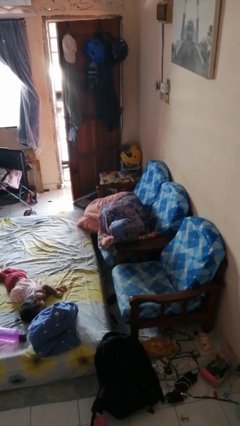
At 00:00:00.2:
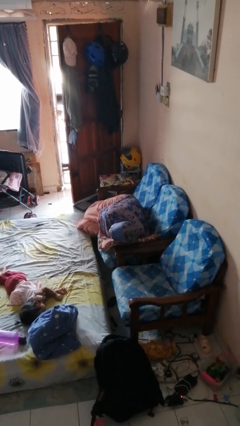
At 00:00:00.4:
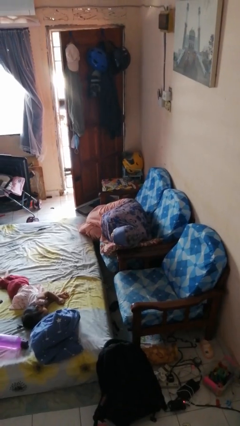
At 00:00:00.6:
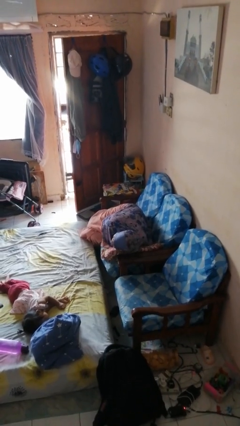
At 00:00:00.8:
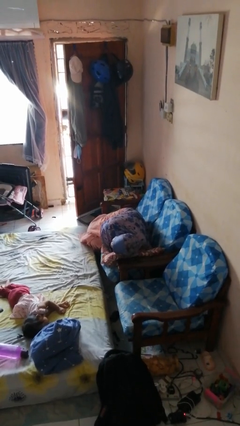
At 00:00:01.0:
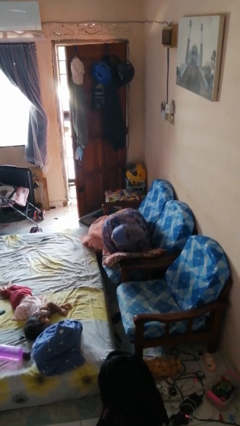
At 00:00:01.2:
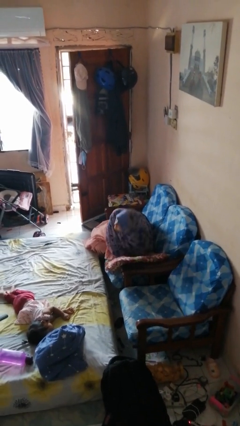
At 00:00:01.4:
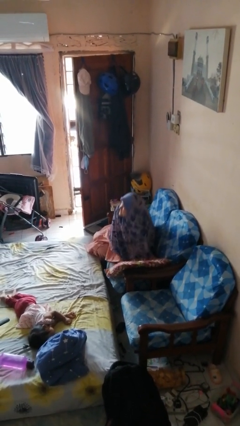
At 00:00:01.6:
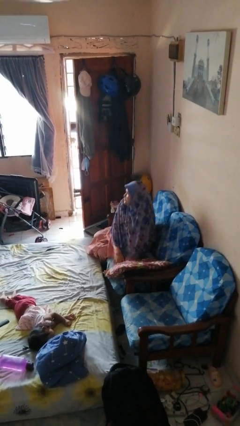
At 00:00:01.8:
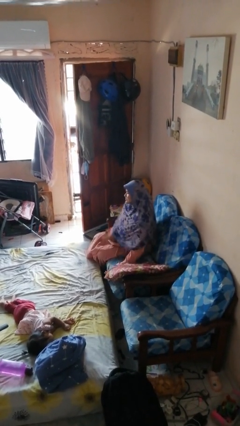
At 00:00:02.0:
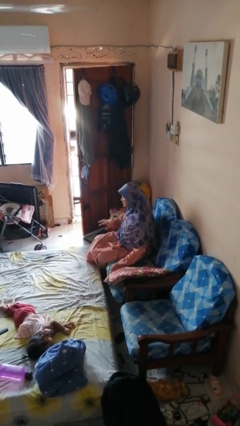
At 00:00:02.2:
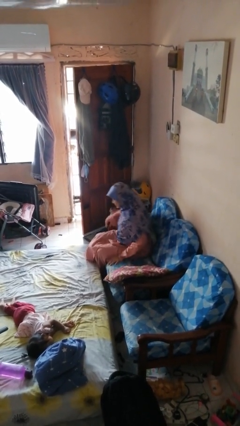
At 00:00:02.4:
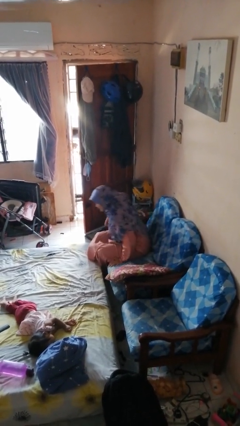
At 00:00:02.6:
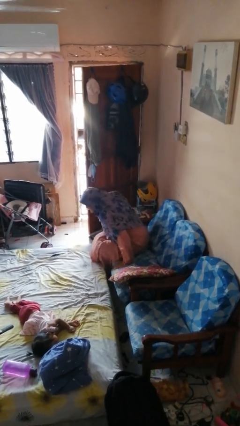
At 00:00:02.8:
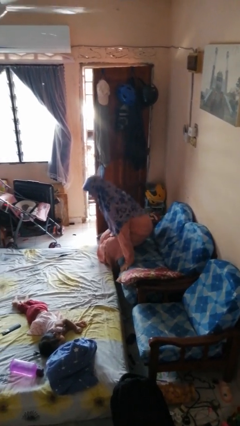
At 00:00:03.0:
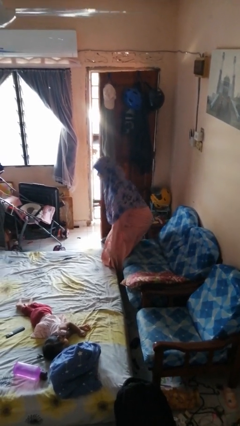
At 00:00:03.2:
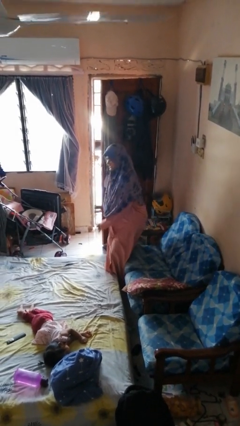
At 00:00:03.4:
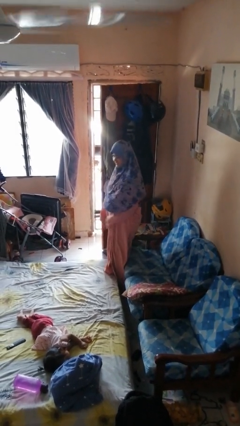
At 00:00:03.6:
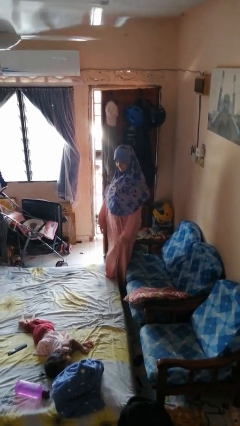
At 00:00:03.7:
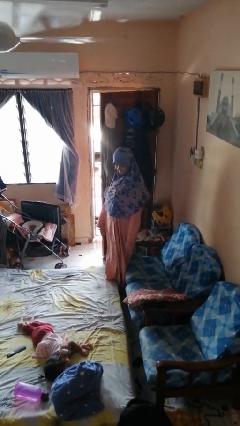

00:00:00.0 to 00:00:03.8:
person stands up

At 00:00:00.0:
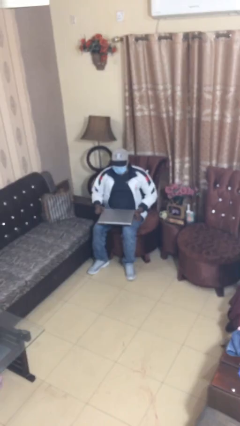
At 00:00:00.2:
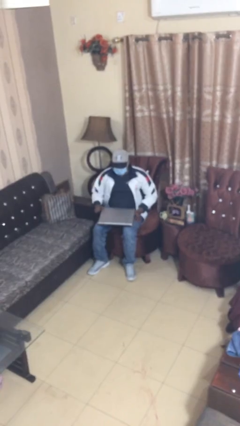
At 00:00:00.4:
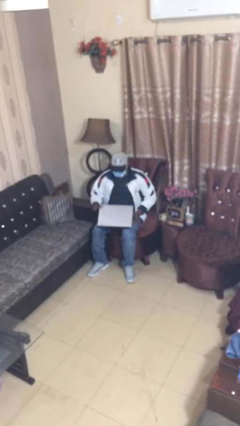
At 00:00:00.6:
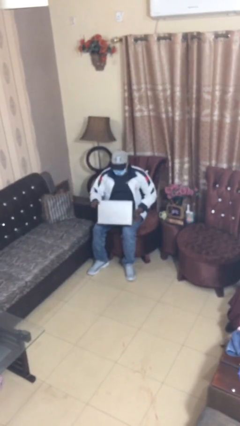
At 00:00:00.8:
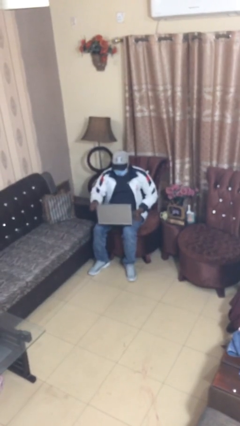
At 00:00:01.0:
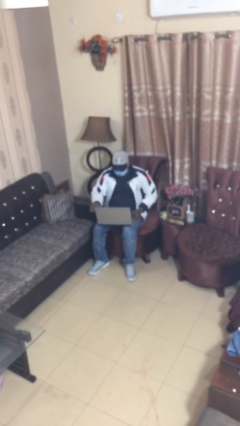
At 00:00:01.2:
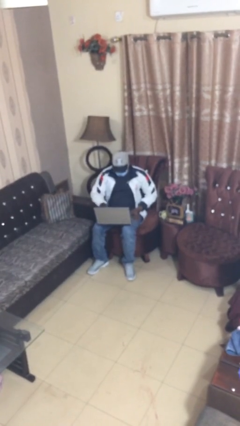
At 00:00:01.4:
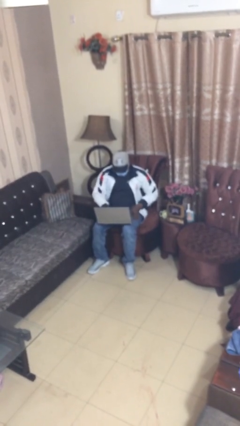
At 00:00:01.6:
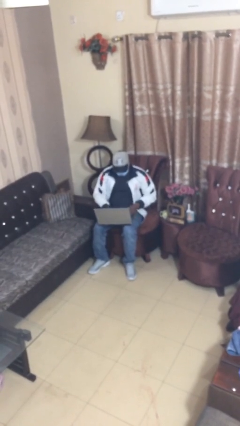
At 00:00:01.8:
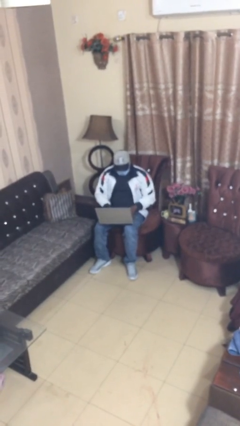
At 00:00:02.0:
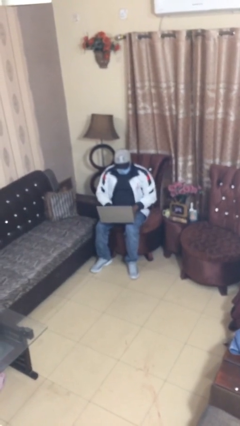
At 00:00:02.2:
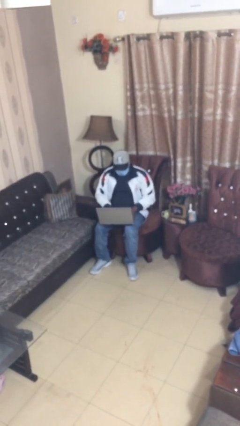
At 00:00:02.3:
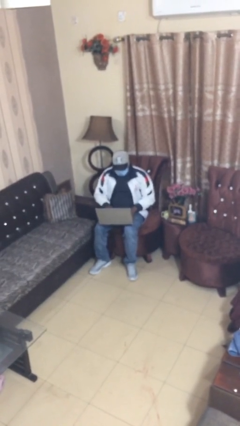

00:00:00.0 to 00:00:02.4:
person interacts with laptop

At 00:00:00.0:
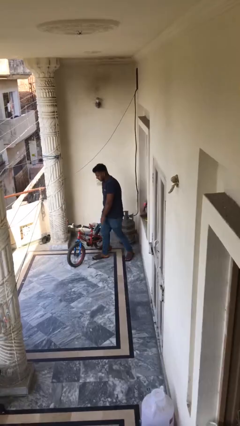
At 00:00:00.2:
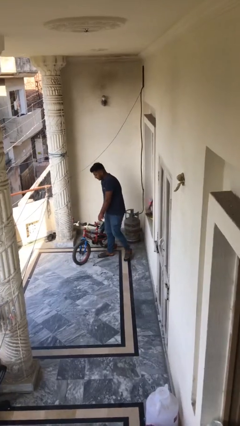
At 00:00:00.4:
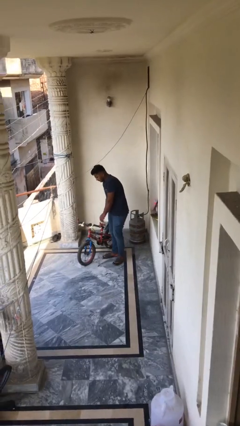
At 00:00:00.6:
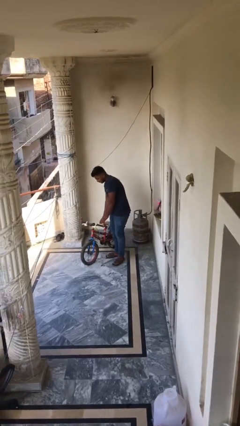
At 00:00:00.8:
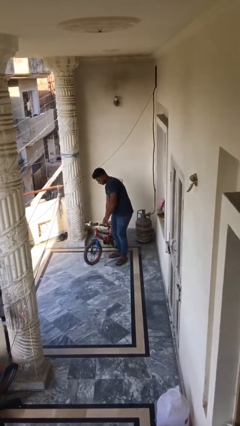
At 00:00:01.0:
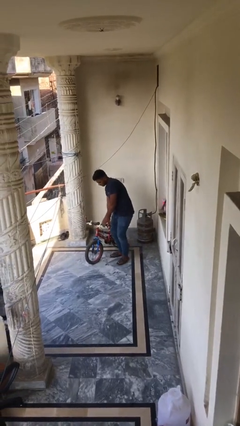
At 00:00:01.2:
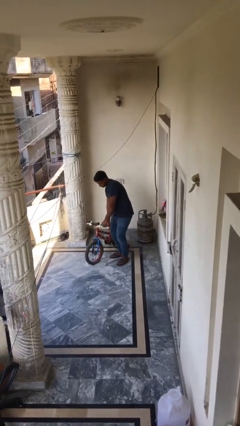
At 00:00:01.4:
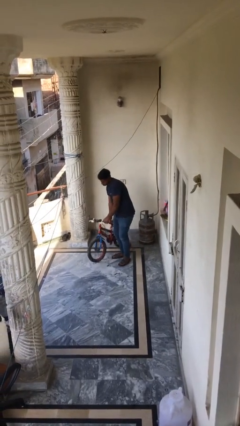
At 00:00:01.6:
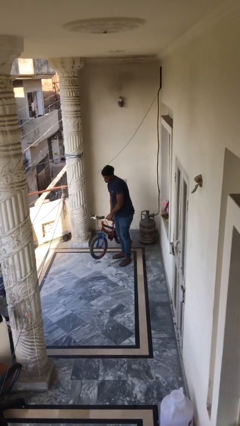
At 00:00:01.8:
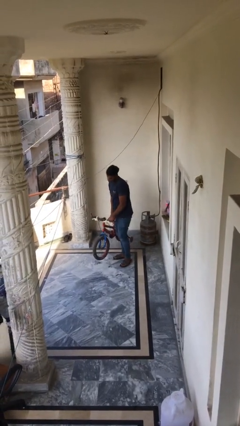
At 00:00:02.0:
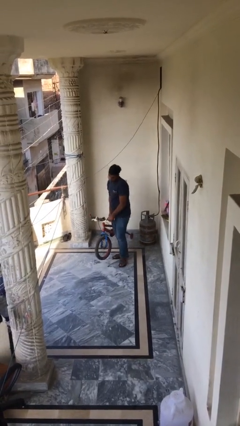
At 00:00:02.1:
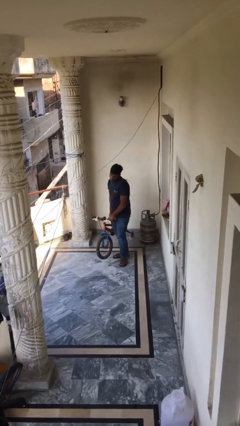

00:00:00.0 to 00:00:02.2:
person picks up object from floor

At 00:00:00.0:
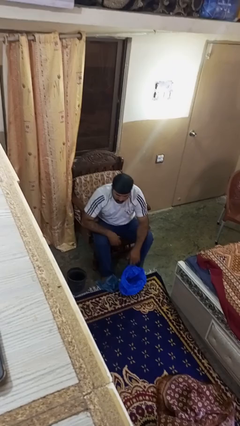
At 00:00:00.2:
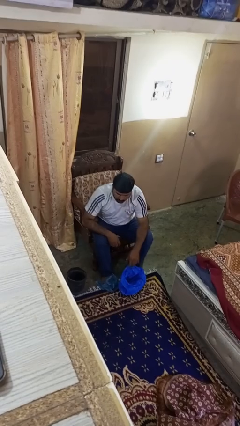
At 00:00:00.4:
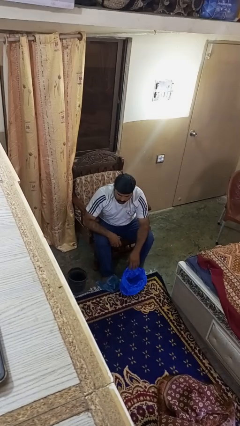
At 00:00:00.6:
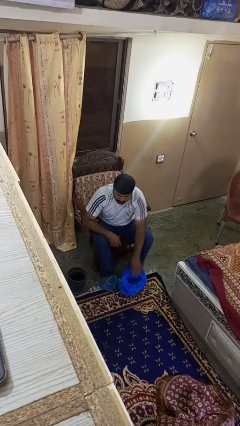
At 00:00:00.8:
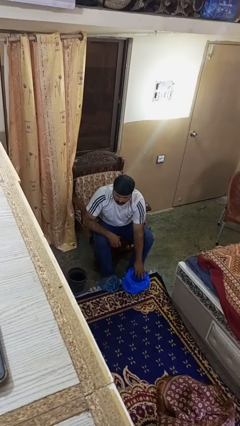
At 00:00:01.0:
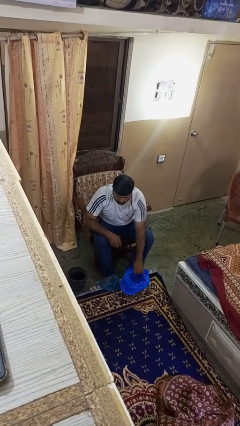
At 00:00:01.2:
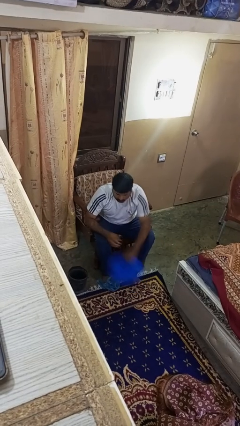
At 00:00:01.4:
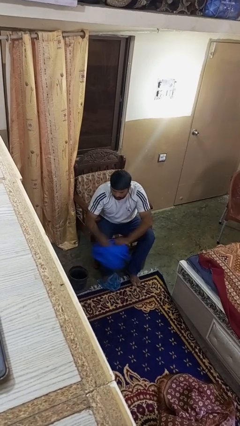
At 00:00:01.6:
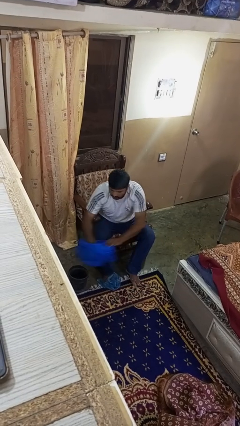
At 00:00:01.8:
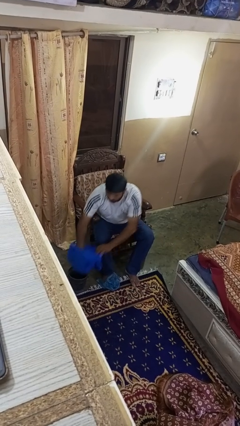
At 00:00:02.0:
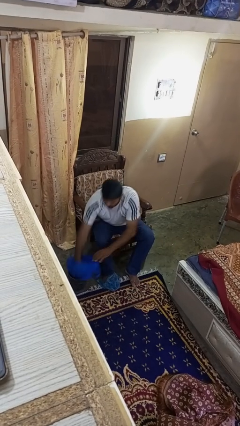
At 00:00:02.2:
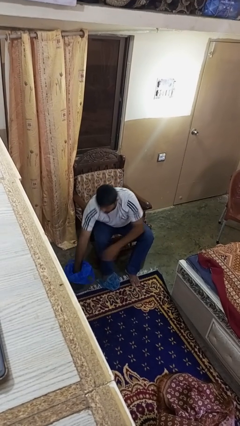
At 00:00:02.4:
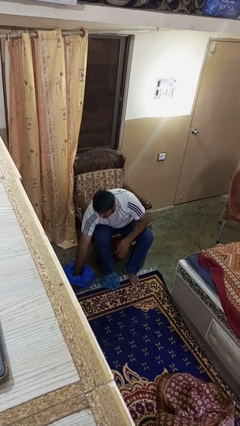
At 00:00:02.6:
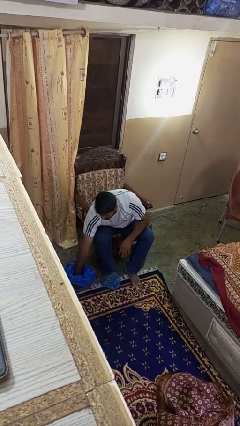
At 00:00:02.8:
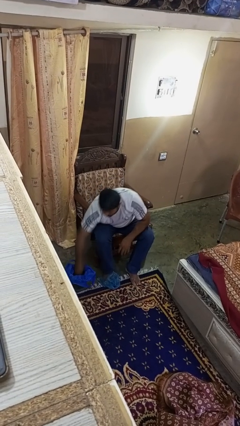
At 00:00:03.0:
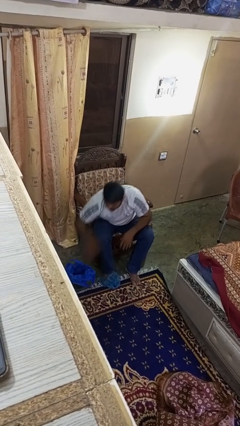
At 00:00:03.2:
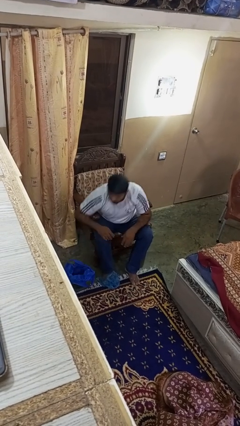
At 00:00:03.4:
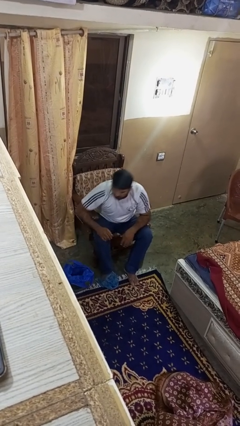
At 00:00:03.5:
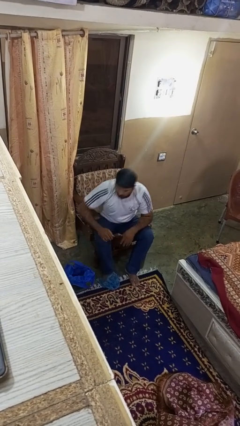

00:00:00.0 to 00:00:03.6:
person inserts trashbag into trashcan

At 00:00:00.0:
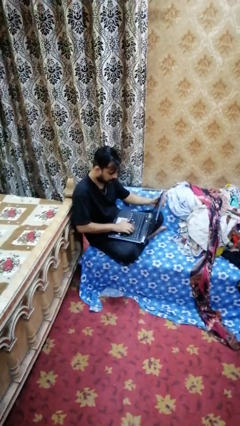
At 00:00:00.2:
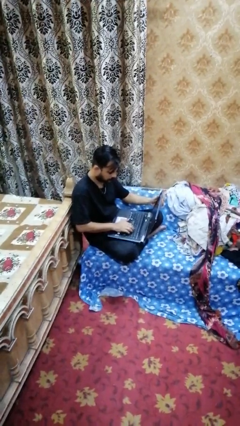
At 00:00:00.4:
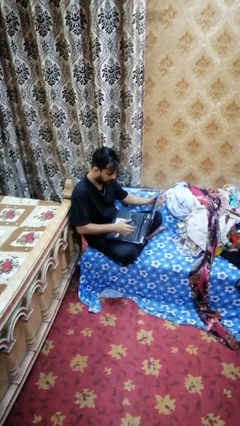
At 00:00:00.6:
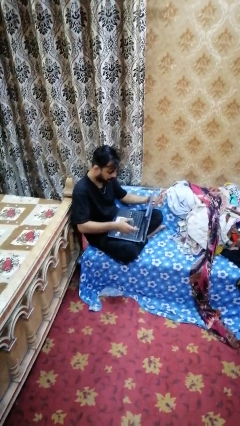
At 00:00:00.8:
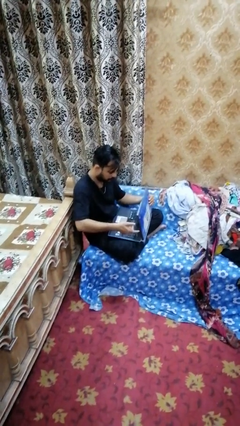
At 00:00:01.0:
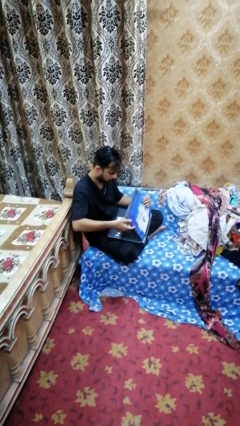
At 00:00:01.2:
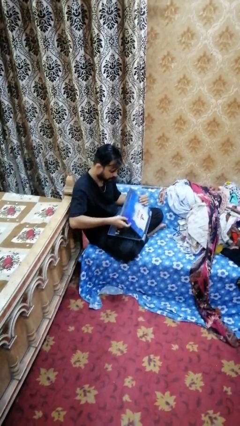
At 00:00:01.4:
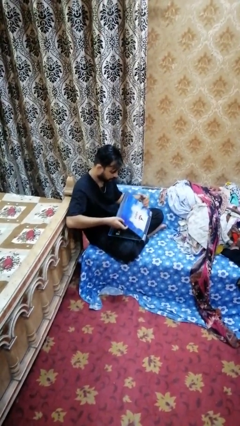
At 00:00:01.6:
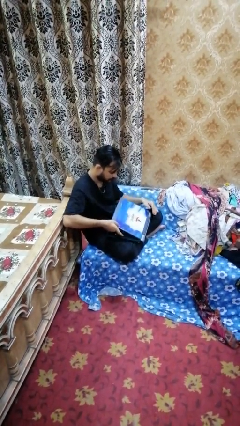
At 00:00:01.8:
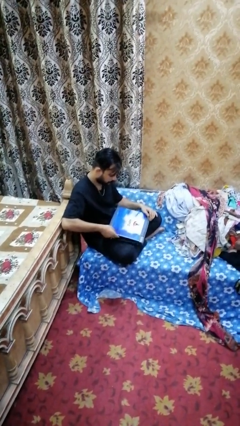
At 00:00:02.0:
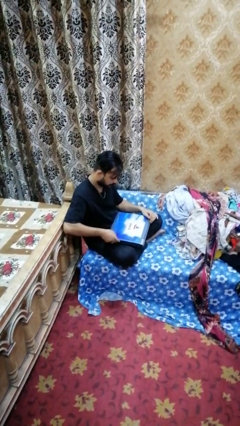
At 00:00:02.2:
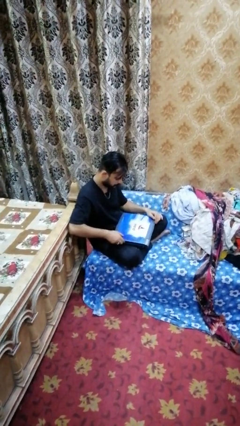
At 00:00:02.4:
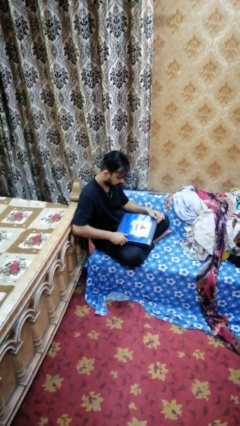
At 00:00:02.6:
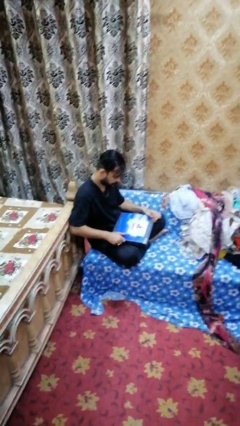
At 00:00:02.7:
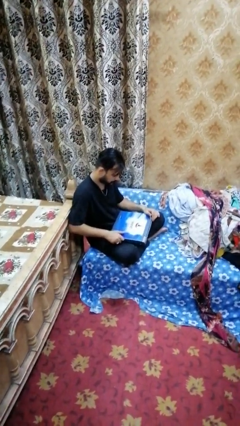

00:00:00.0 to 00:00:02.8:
person closes laptop

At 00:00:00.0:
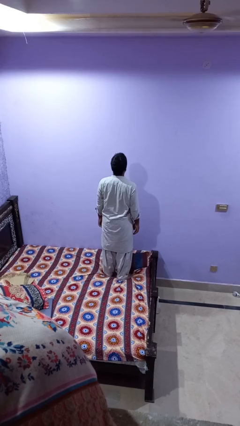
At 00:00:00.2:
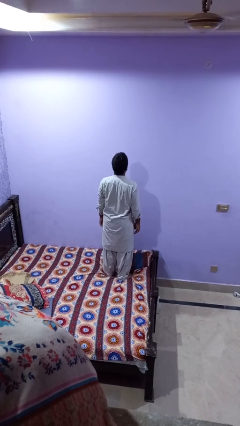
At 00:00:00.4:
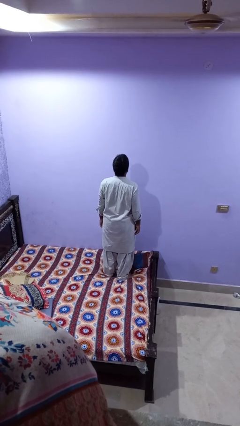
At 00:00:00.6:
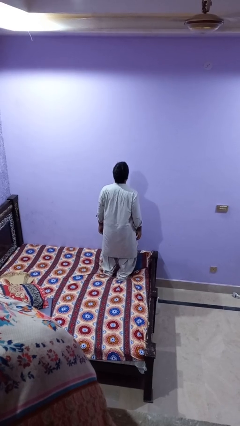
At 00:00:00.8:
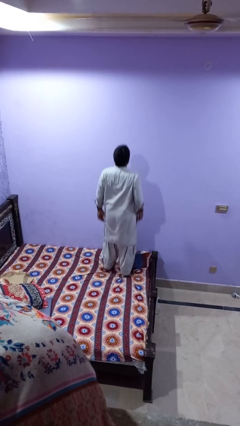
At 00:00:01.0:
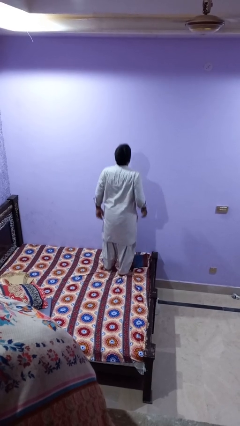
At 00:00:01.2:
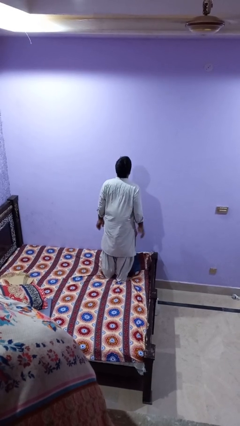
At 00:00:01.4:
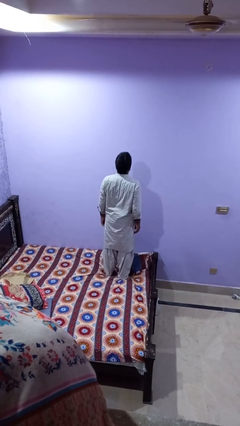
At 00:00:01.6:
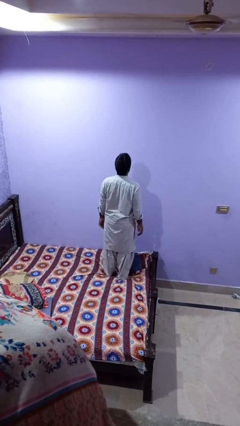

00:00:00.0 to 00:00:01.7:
person jumps on bed
